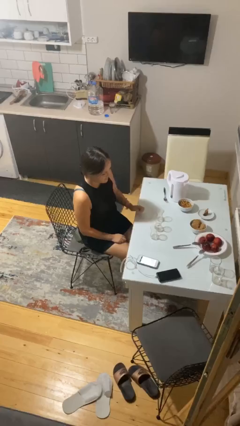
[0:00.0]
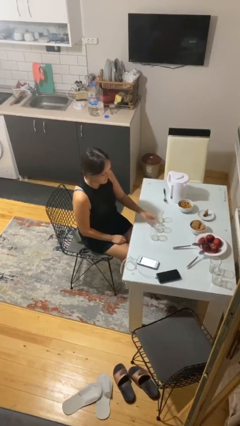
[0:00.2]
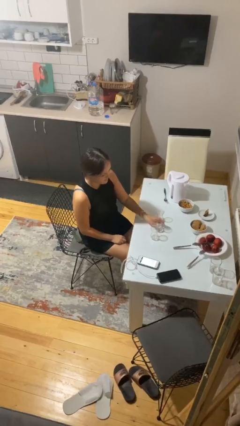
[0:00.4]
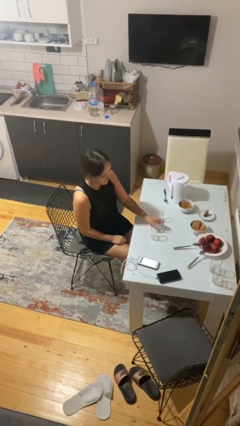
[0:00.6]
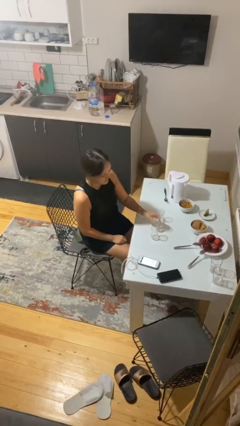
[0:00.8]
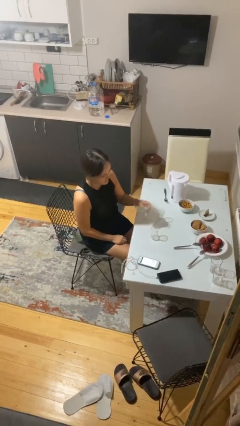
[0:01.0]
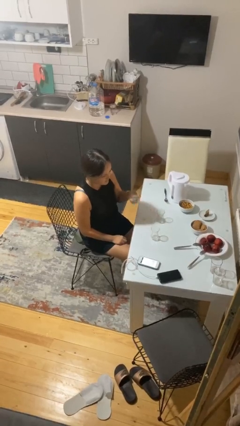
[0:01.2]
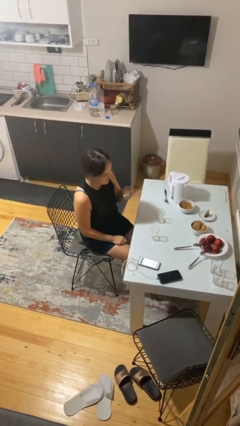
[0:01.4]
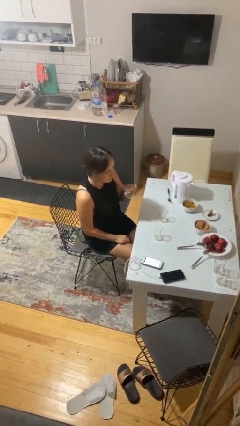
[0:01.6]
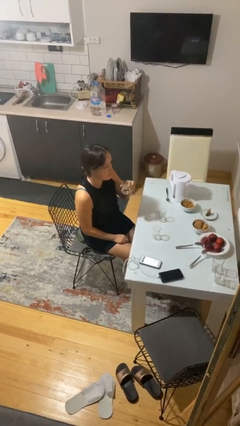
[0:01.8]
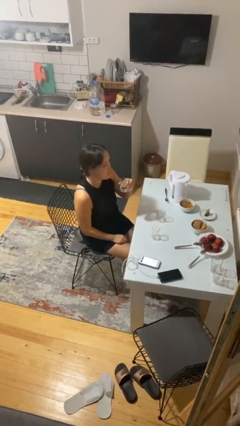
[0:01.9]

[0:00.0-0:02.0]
person picks up object from table

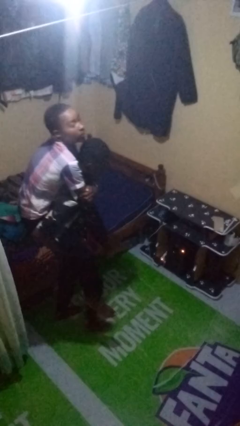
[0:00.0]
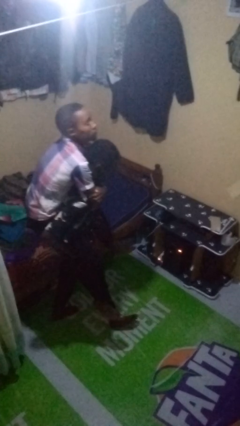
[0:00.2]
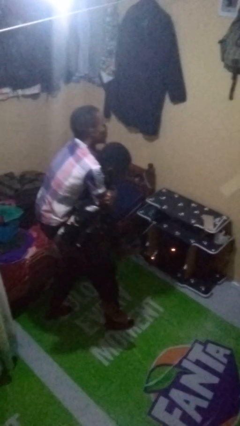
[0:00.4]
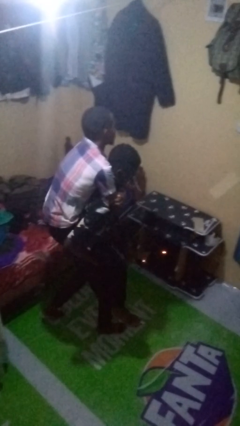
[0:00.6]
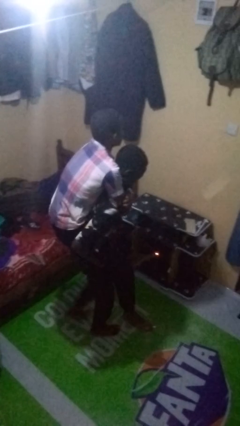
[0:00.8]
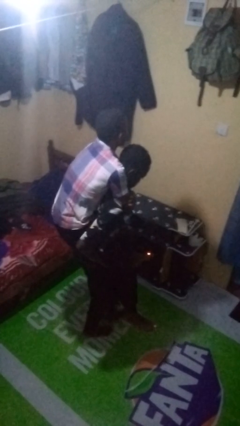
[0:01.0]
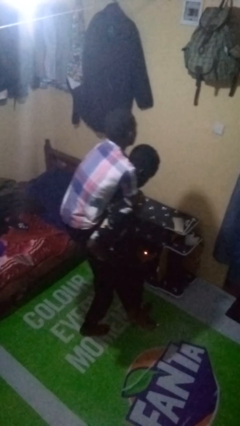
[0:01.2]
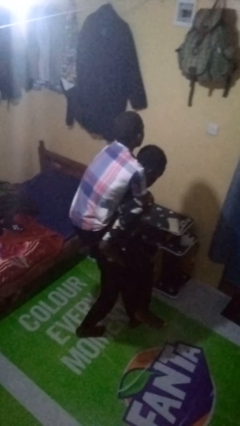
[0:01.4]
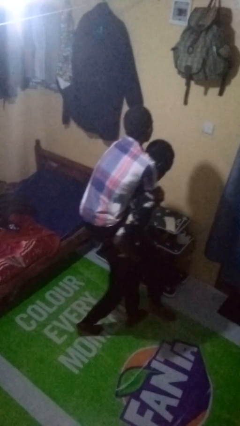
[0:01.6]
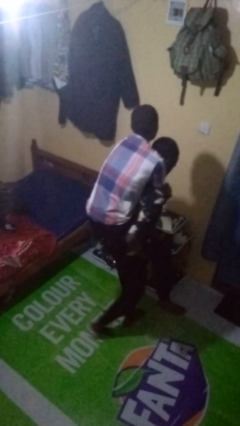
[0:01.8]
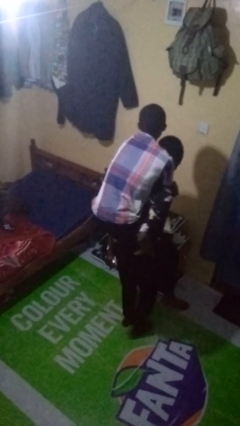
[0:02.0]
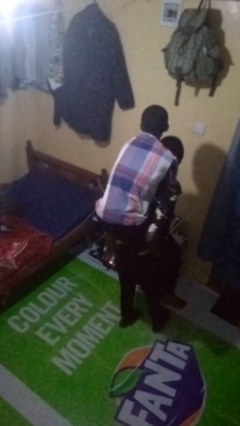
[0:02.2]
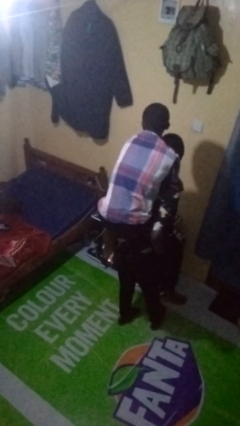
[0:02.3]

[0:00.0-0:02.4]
person carries person on back

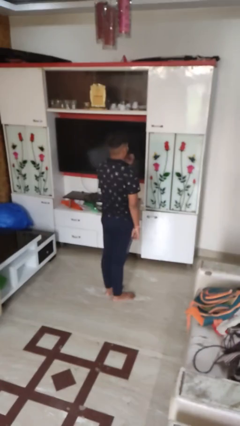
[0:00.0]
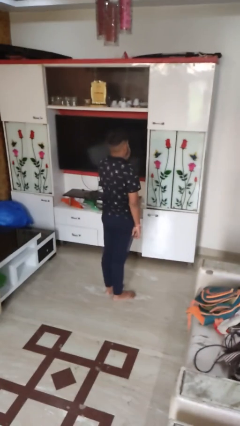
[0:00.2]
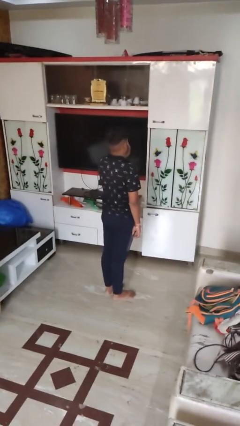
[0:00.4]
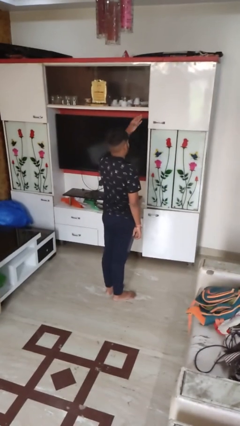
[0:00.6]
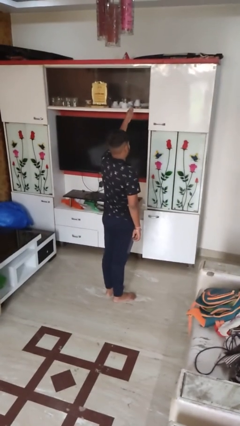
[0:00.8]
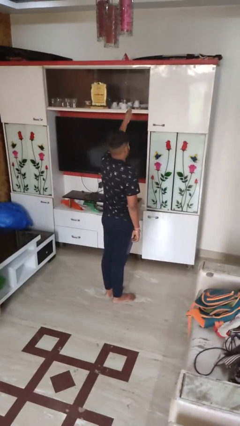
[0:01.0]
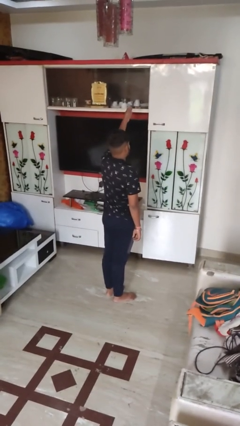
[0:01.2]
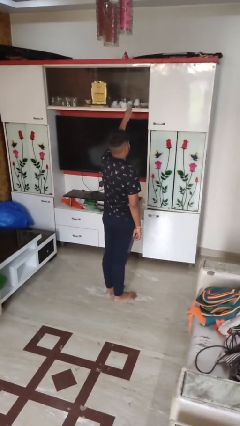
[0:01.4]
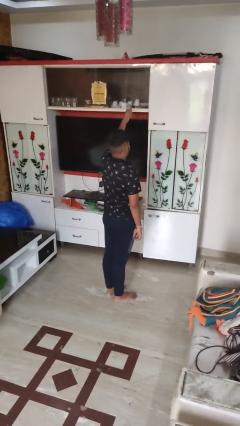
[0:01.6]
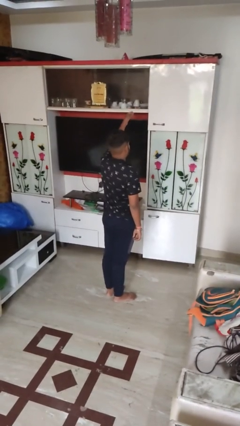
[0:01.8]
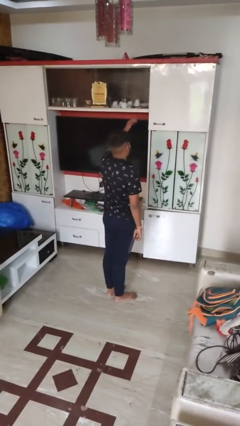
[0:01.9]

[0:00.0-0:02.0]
person gestures blow kiss

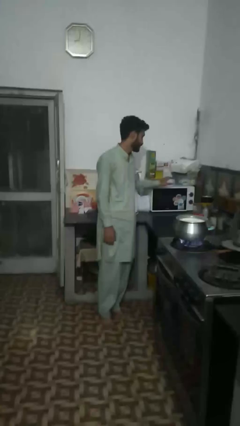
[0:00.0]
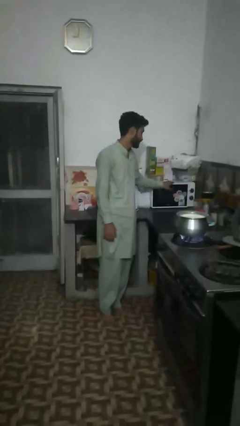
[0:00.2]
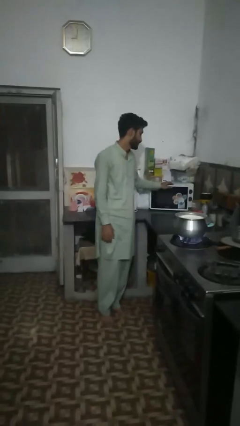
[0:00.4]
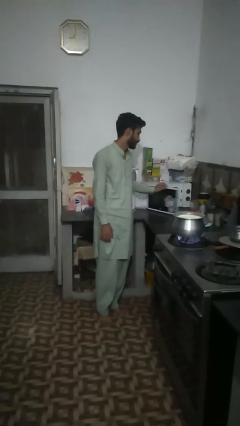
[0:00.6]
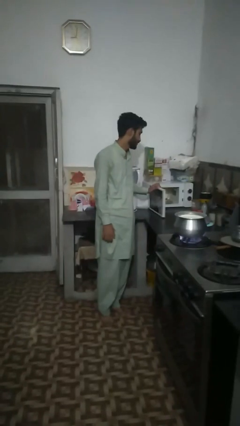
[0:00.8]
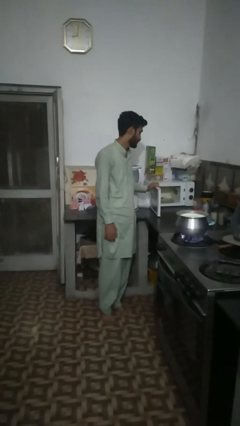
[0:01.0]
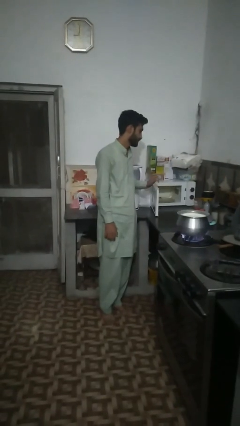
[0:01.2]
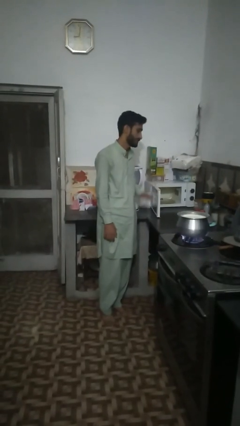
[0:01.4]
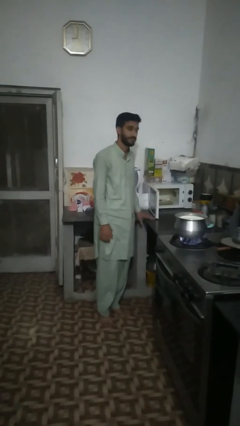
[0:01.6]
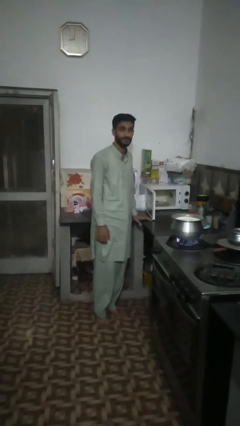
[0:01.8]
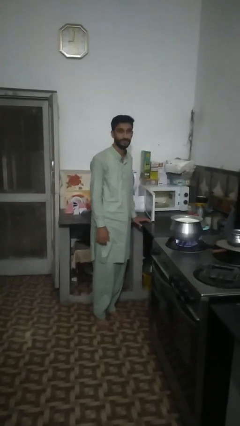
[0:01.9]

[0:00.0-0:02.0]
person opens microwave

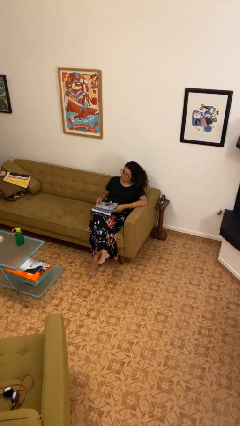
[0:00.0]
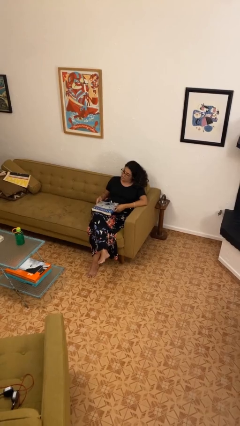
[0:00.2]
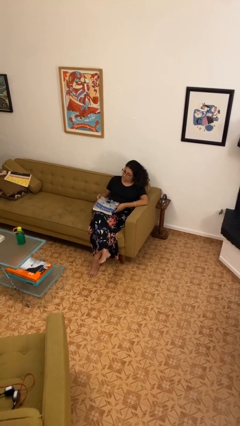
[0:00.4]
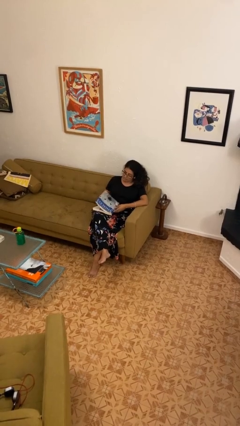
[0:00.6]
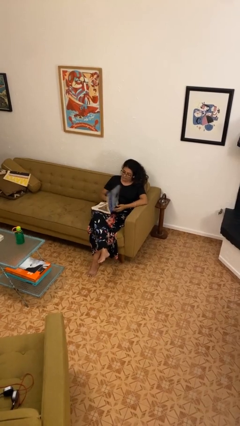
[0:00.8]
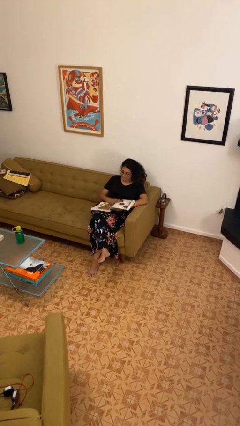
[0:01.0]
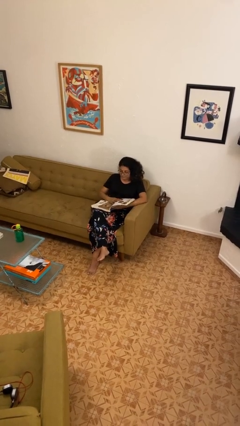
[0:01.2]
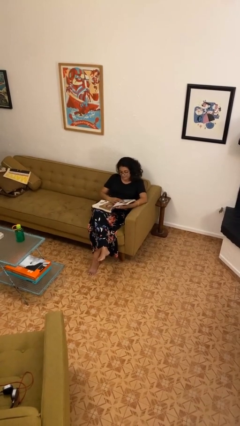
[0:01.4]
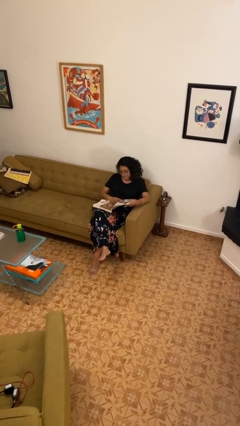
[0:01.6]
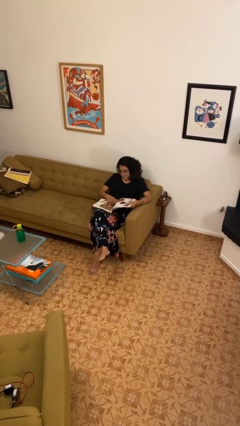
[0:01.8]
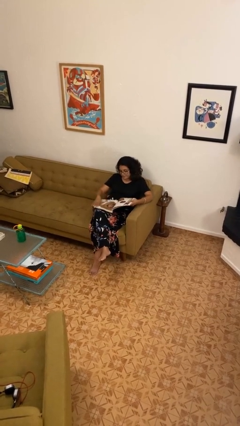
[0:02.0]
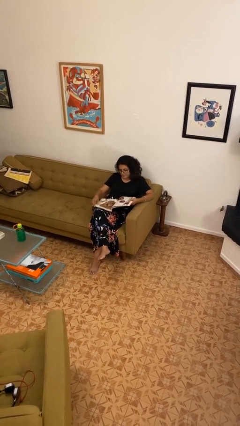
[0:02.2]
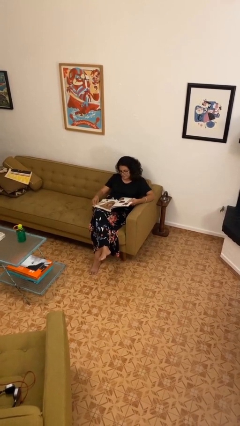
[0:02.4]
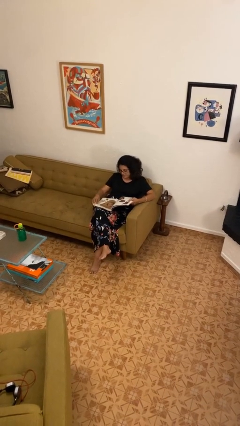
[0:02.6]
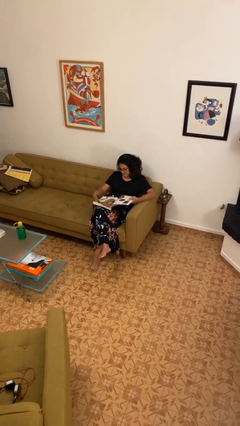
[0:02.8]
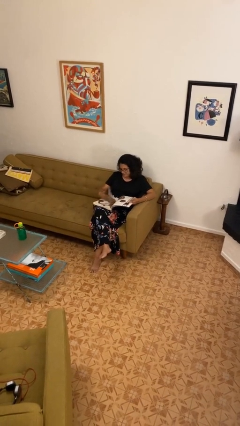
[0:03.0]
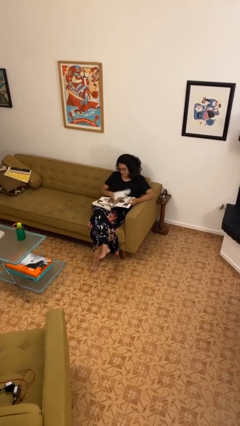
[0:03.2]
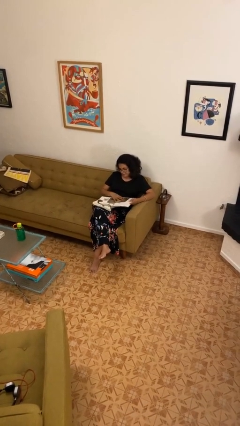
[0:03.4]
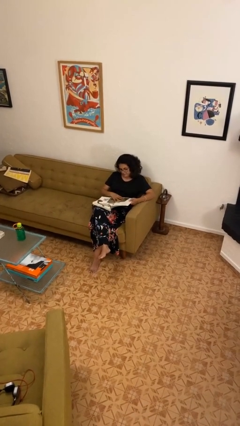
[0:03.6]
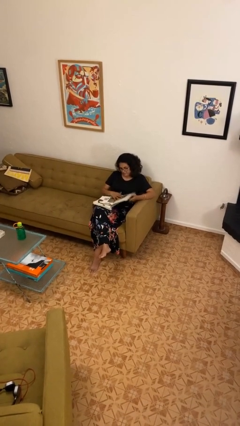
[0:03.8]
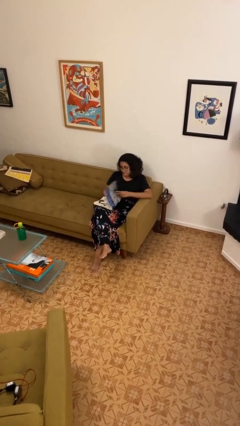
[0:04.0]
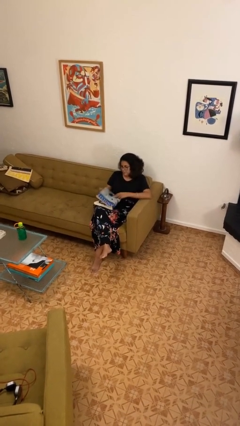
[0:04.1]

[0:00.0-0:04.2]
person reads book

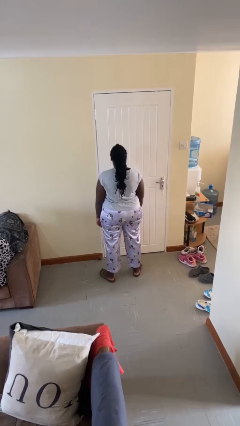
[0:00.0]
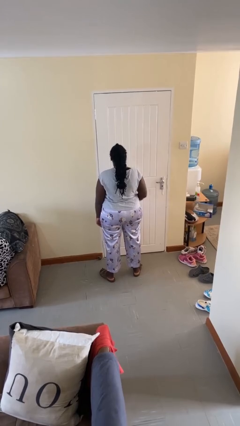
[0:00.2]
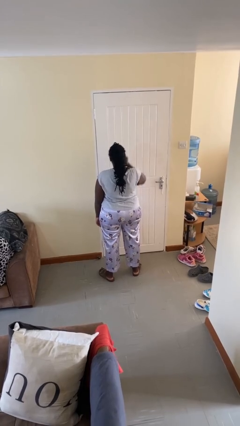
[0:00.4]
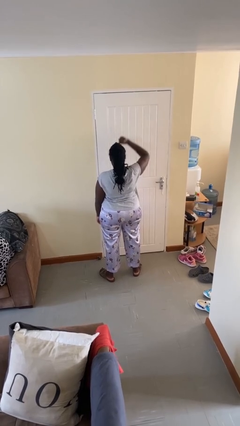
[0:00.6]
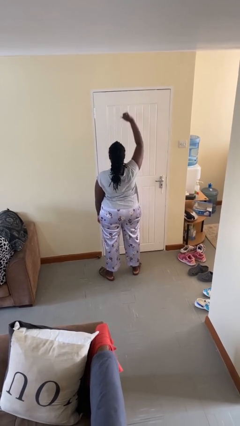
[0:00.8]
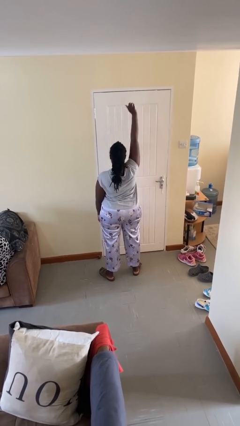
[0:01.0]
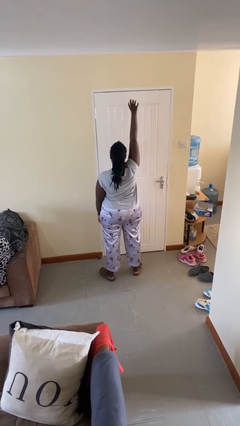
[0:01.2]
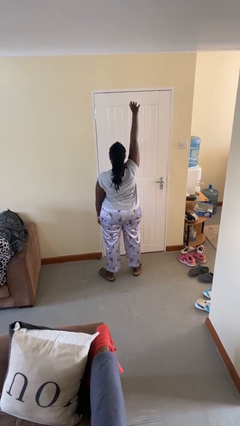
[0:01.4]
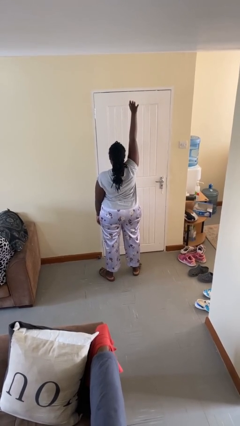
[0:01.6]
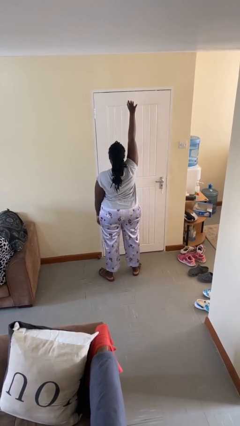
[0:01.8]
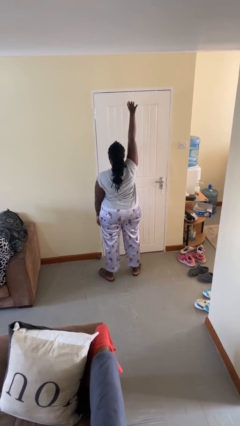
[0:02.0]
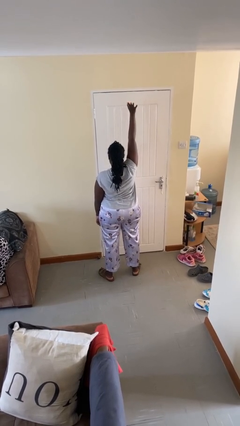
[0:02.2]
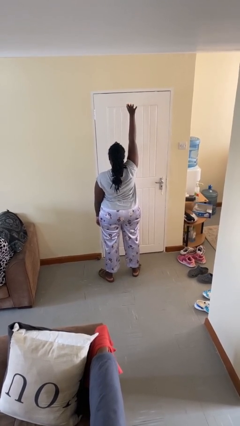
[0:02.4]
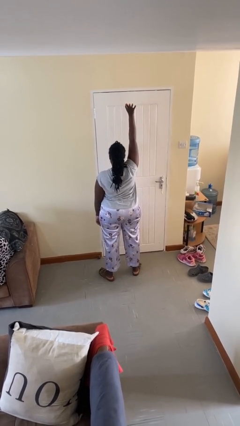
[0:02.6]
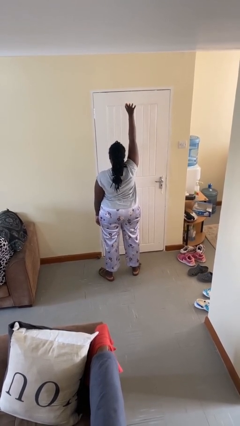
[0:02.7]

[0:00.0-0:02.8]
person gestures raise hand

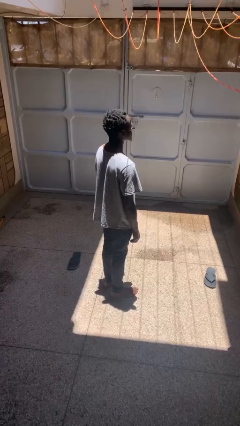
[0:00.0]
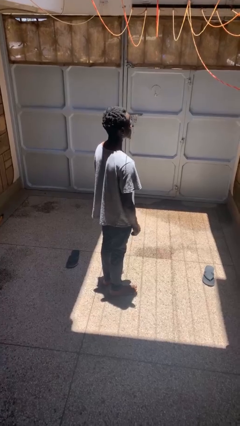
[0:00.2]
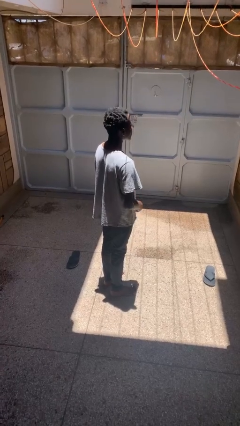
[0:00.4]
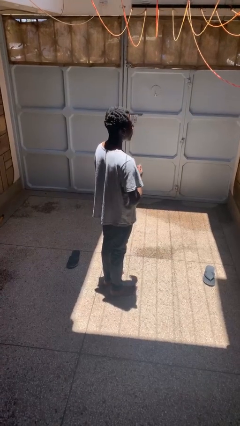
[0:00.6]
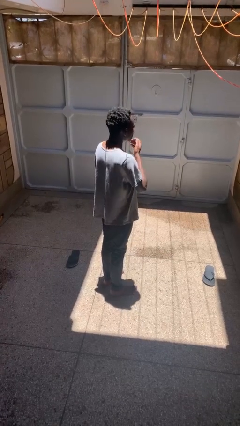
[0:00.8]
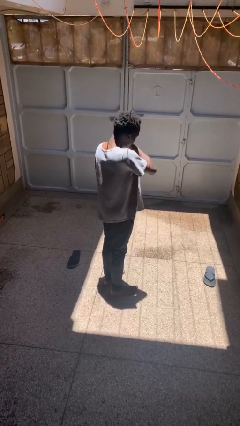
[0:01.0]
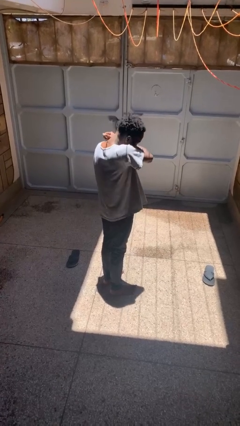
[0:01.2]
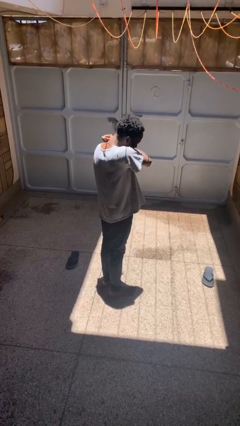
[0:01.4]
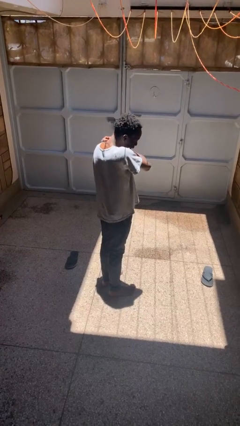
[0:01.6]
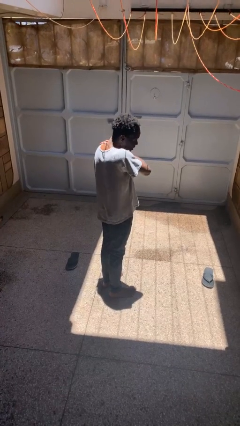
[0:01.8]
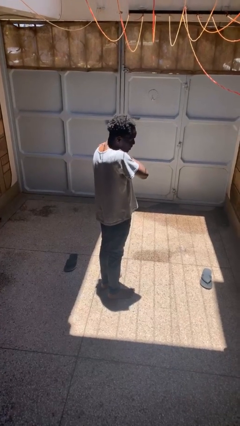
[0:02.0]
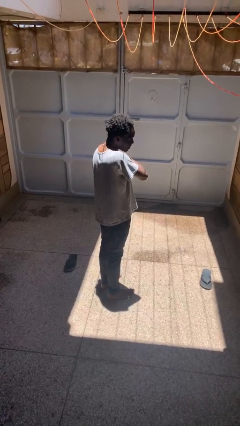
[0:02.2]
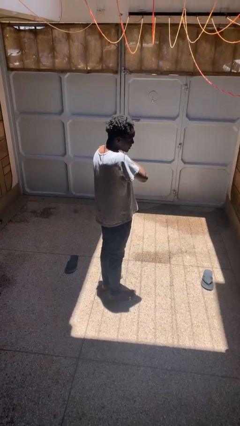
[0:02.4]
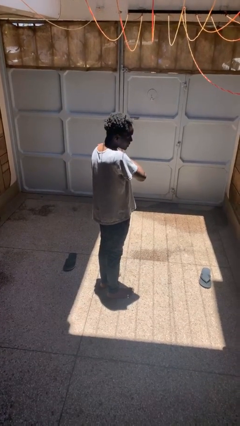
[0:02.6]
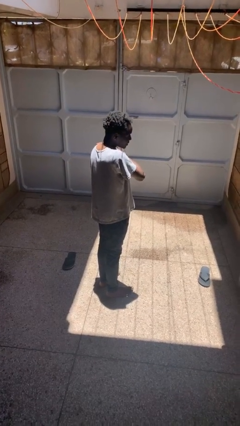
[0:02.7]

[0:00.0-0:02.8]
person sneezes into arm
